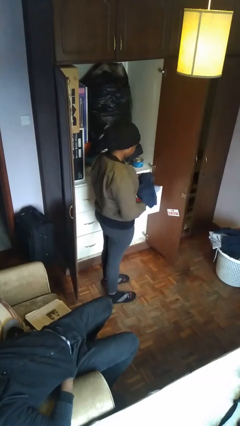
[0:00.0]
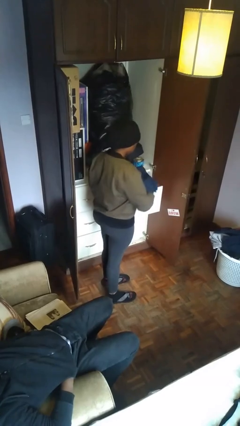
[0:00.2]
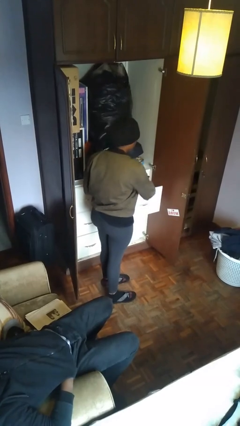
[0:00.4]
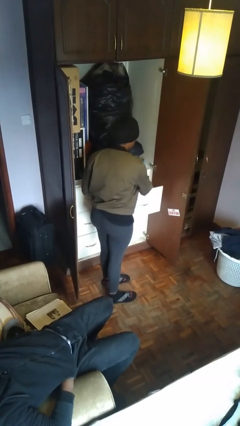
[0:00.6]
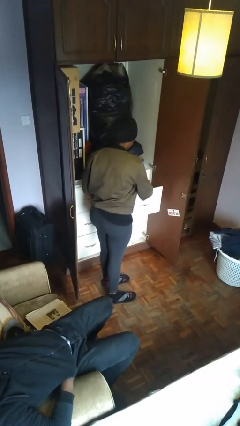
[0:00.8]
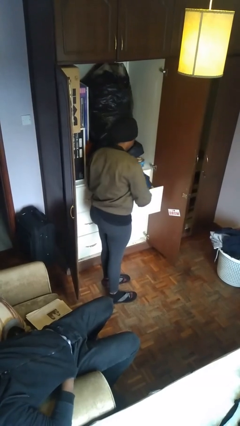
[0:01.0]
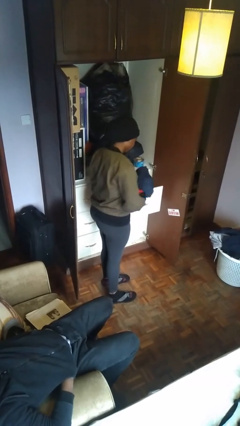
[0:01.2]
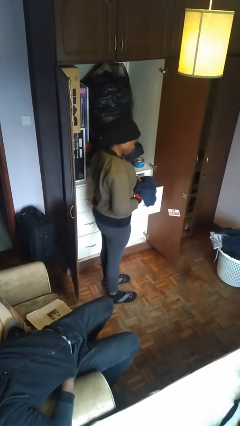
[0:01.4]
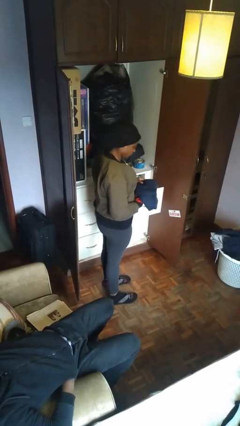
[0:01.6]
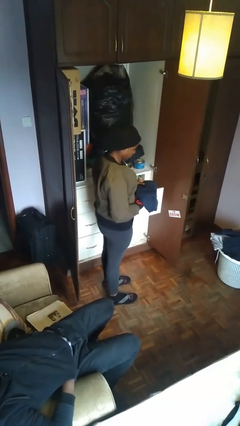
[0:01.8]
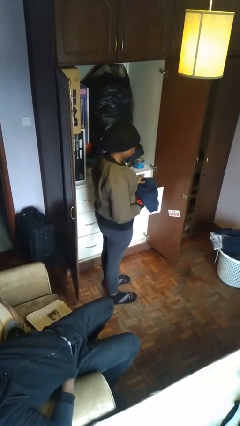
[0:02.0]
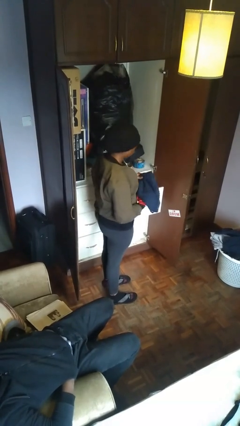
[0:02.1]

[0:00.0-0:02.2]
person puts clothes into dresser

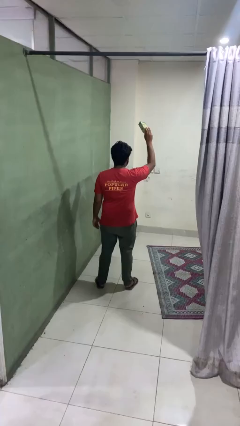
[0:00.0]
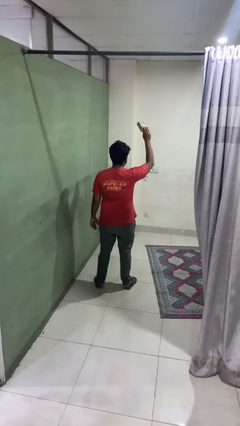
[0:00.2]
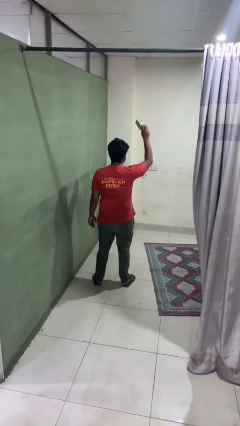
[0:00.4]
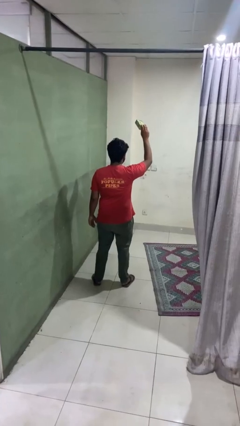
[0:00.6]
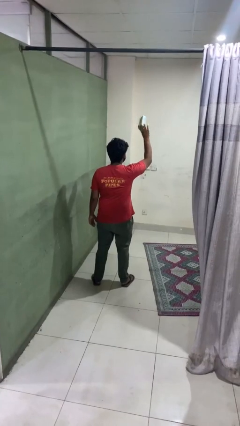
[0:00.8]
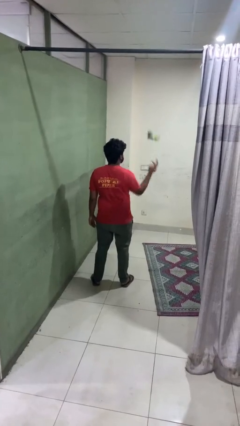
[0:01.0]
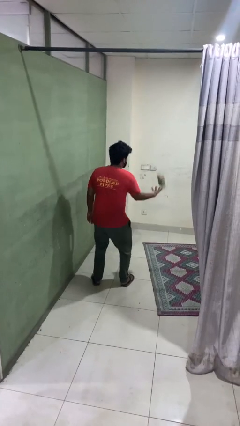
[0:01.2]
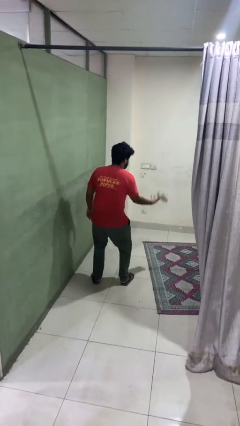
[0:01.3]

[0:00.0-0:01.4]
person drops object

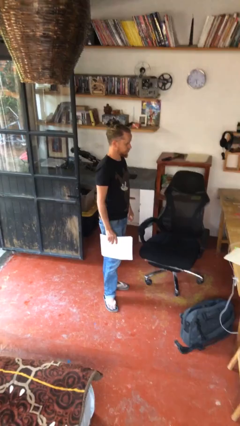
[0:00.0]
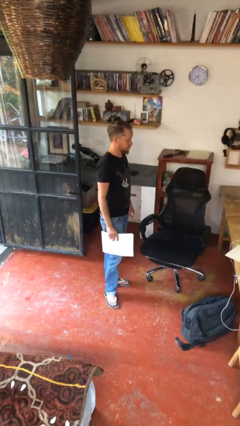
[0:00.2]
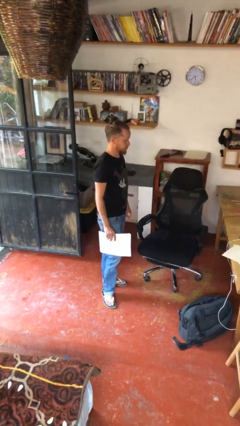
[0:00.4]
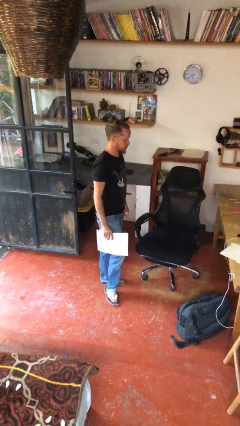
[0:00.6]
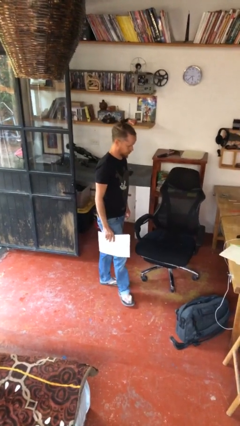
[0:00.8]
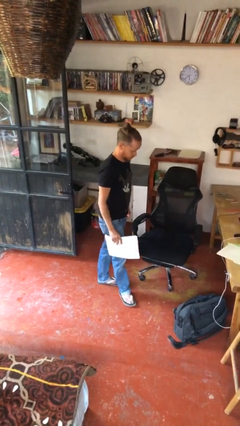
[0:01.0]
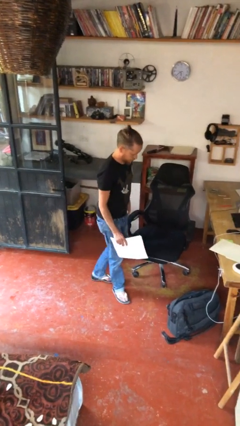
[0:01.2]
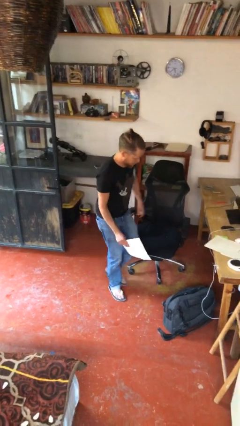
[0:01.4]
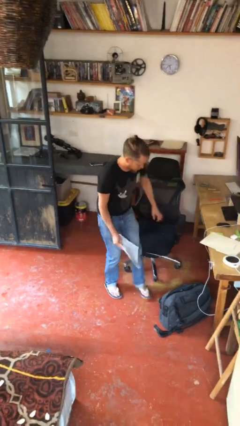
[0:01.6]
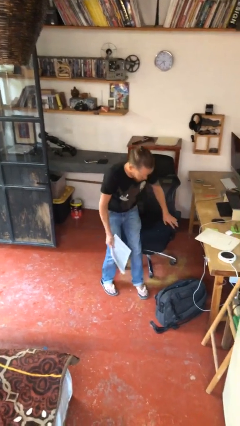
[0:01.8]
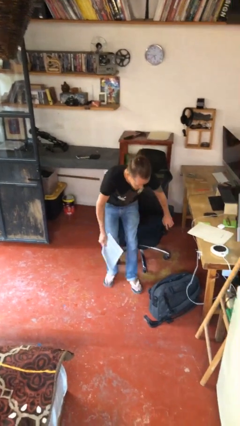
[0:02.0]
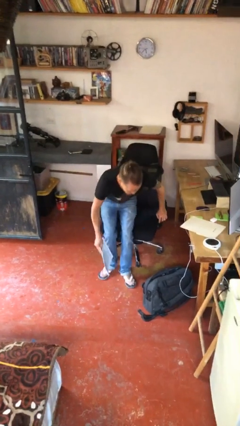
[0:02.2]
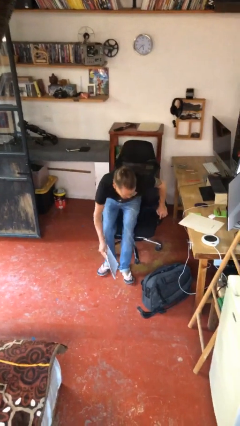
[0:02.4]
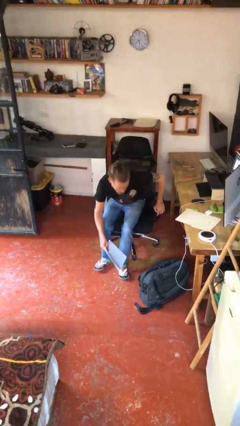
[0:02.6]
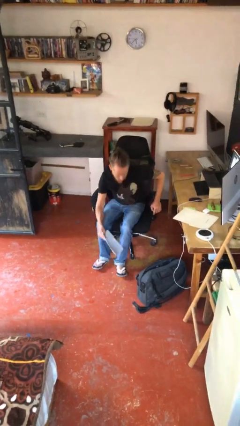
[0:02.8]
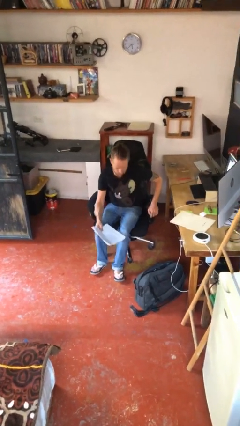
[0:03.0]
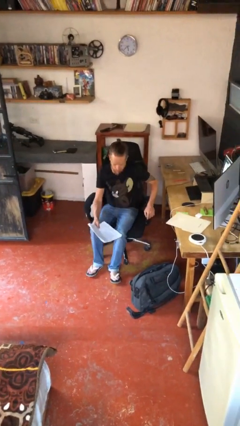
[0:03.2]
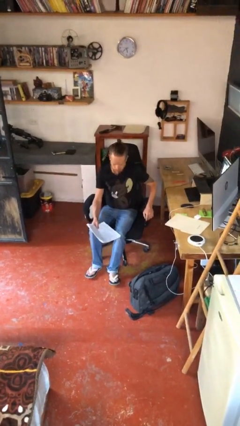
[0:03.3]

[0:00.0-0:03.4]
person sits down

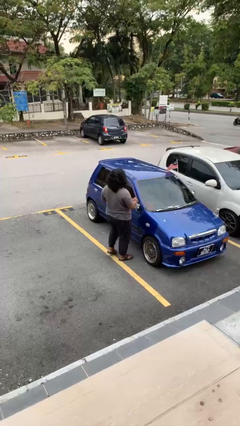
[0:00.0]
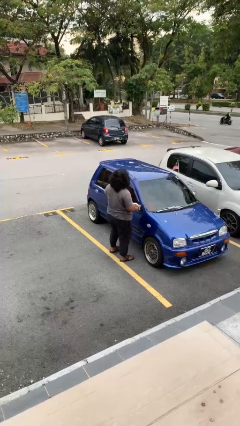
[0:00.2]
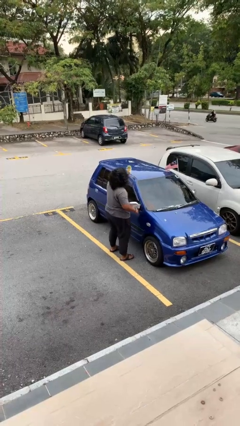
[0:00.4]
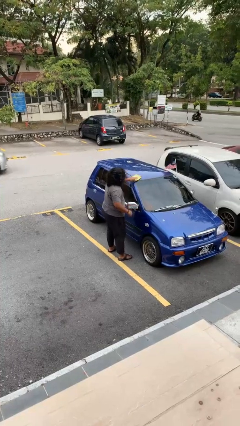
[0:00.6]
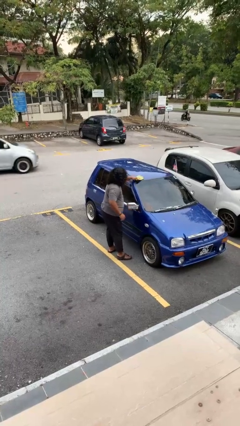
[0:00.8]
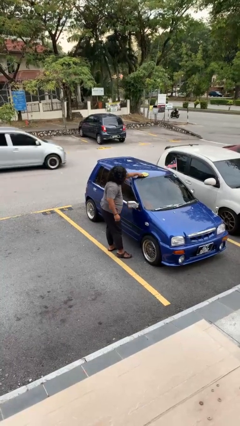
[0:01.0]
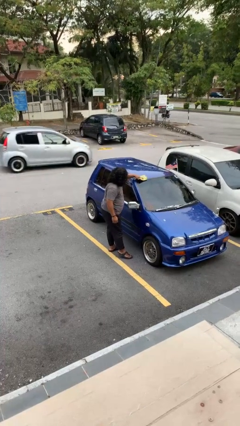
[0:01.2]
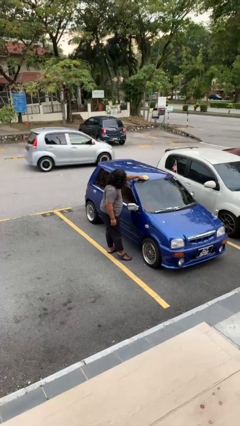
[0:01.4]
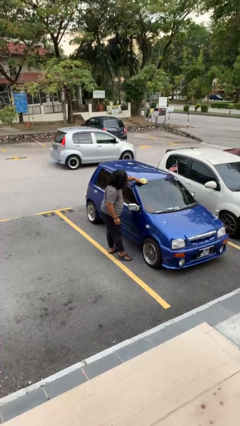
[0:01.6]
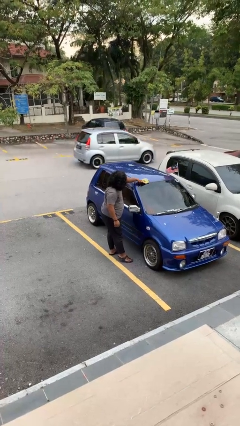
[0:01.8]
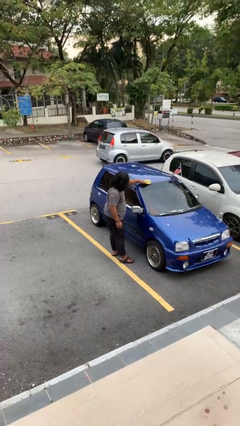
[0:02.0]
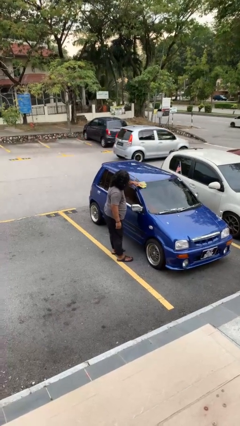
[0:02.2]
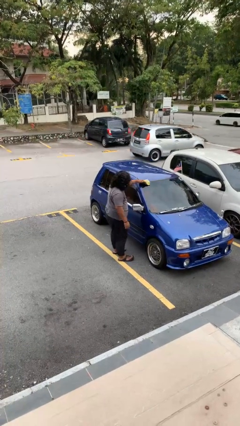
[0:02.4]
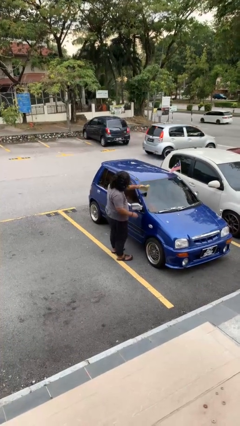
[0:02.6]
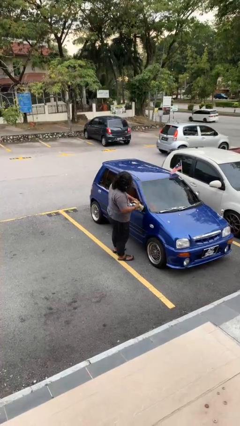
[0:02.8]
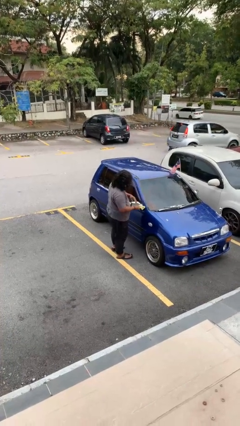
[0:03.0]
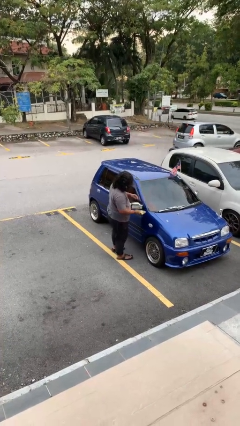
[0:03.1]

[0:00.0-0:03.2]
person polishes car with rag

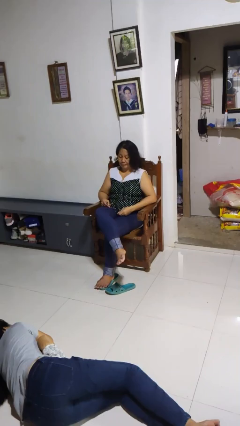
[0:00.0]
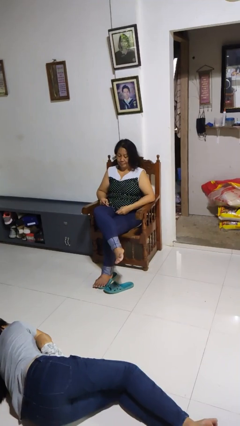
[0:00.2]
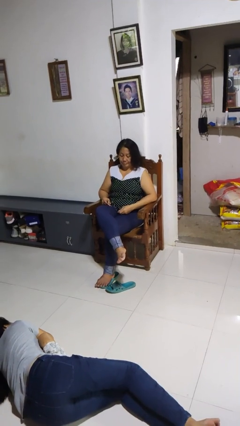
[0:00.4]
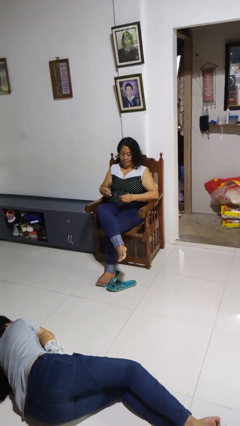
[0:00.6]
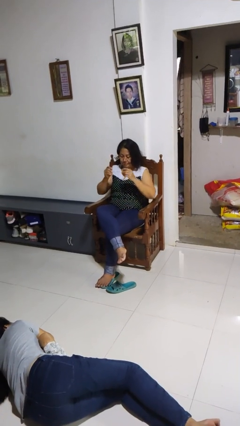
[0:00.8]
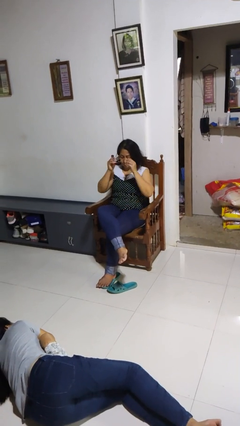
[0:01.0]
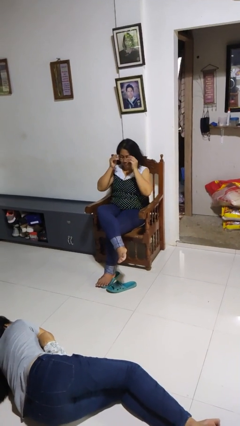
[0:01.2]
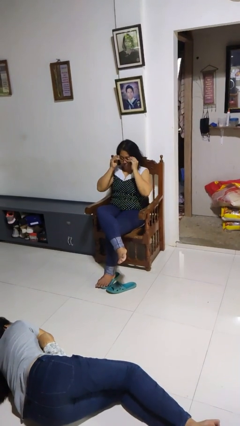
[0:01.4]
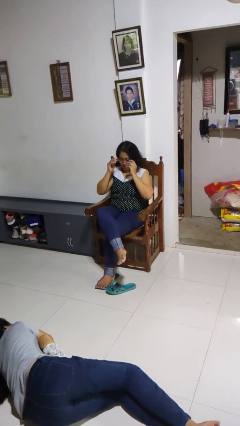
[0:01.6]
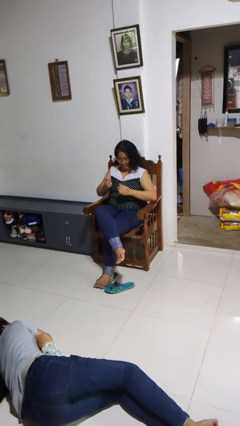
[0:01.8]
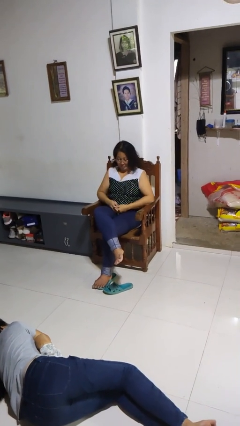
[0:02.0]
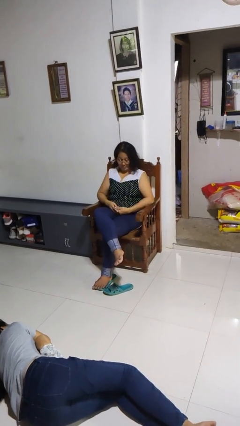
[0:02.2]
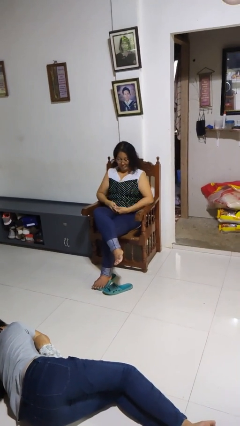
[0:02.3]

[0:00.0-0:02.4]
person puts on glasses

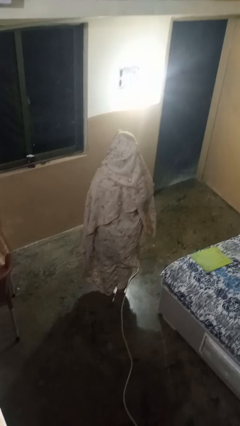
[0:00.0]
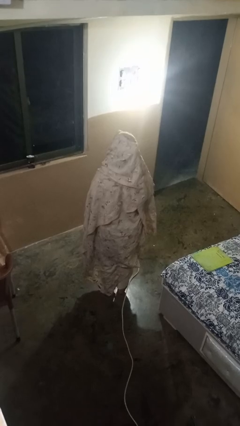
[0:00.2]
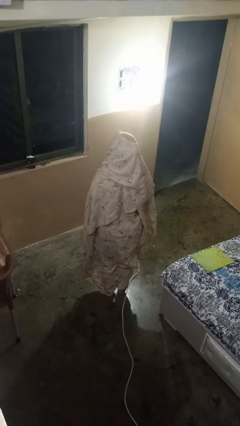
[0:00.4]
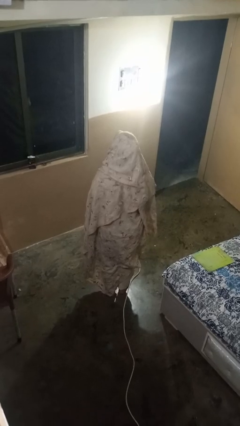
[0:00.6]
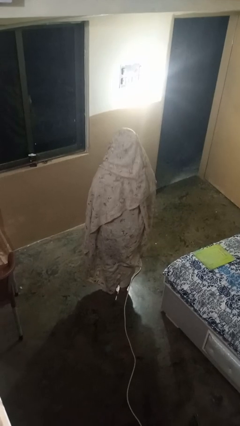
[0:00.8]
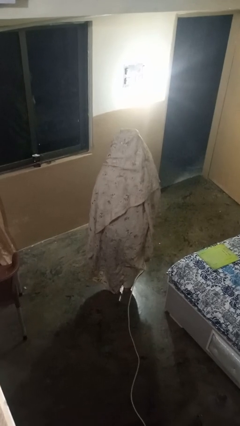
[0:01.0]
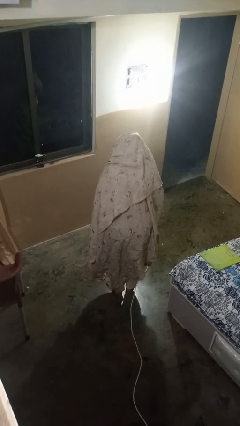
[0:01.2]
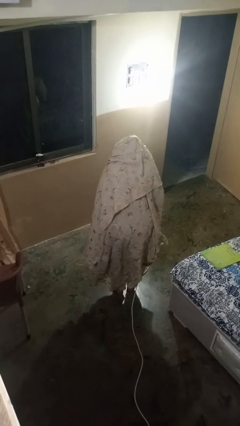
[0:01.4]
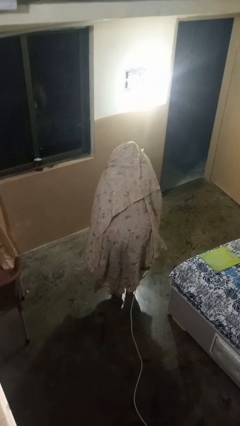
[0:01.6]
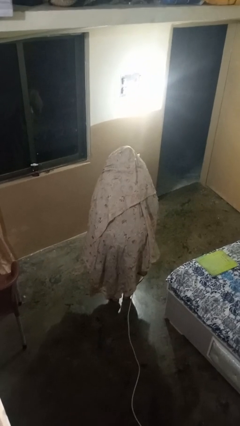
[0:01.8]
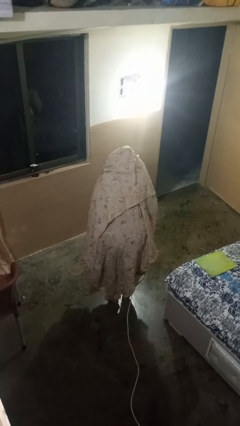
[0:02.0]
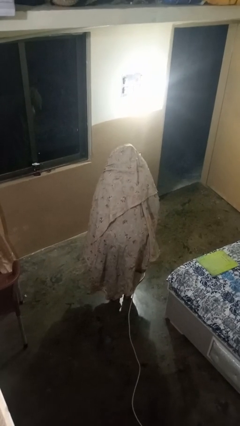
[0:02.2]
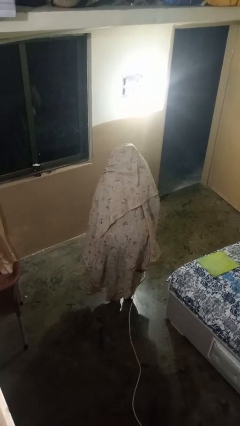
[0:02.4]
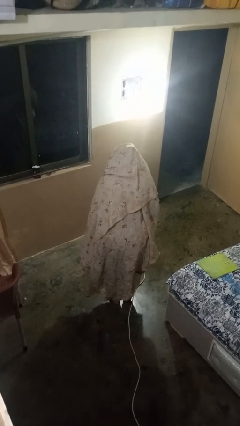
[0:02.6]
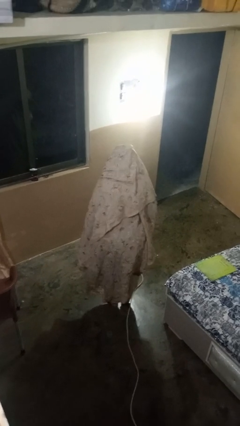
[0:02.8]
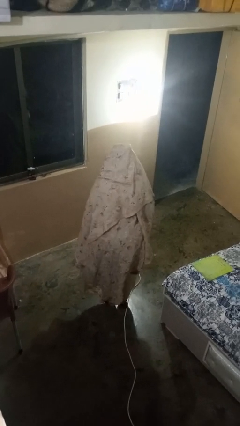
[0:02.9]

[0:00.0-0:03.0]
person bows

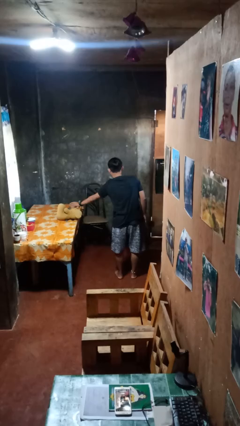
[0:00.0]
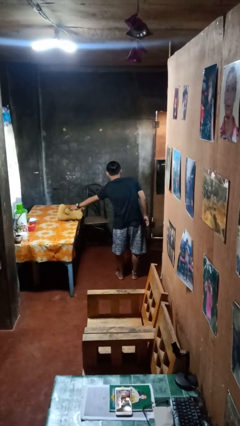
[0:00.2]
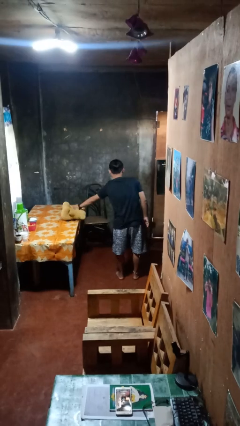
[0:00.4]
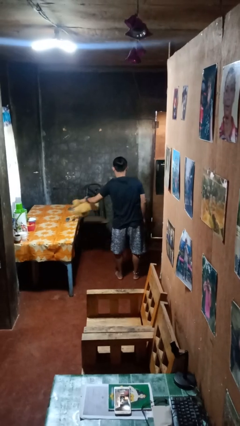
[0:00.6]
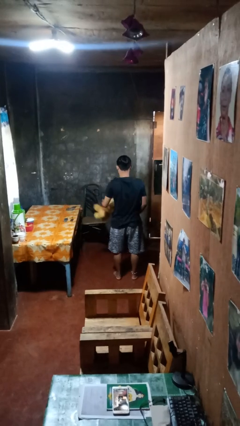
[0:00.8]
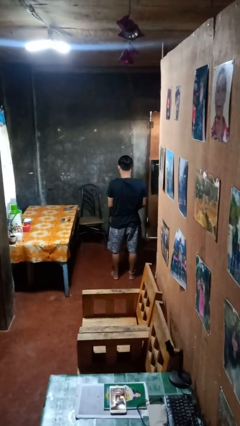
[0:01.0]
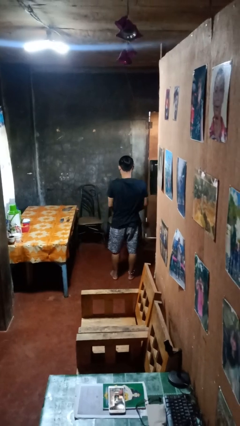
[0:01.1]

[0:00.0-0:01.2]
person picks up object from table

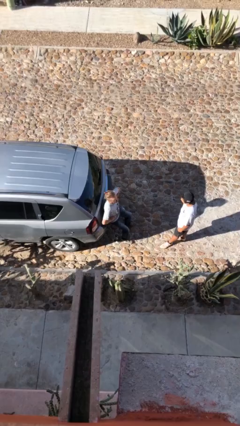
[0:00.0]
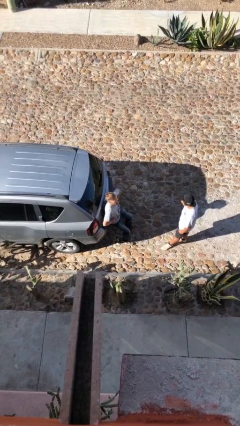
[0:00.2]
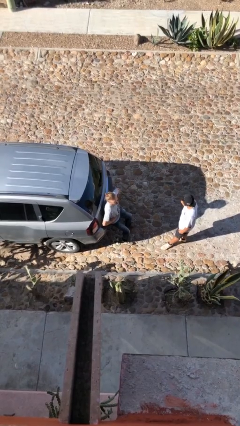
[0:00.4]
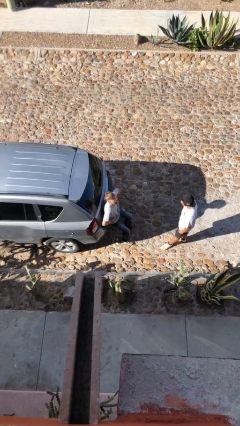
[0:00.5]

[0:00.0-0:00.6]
person shakes hand
